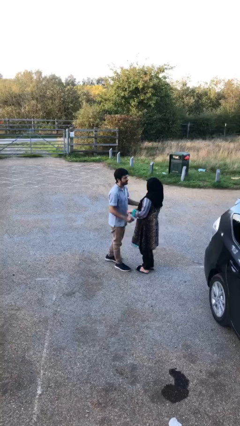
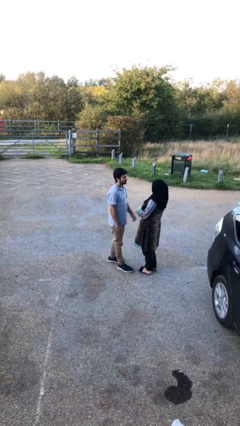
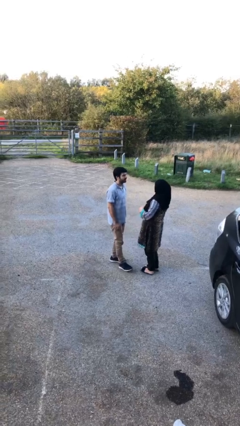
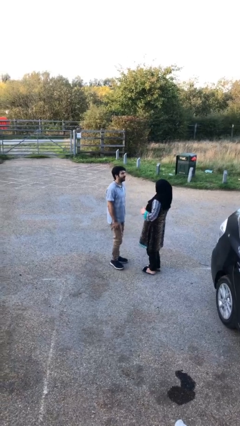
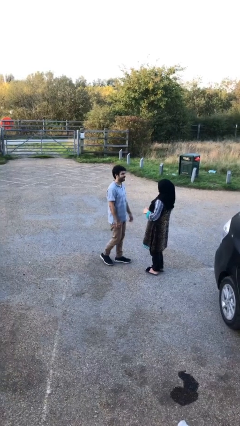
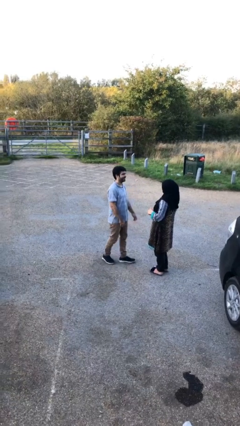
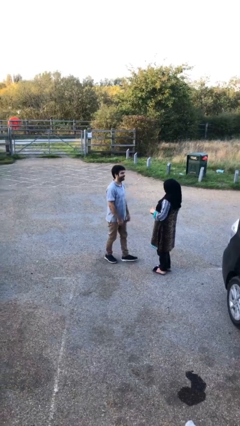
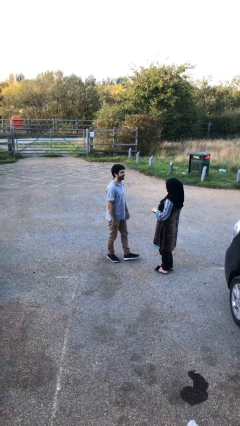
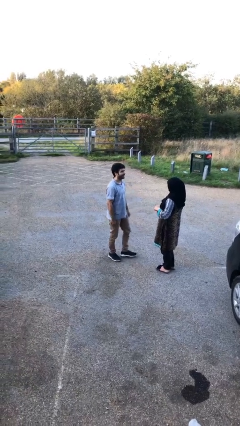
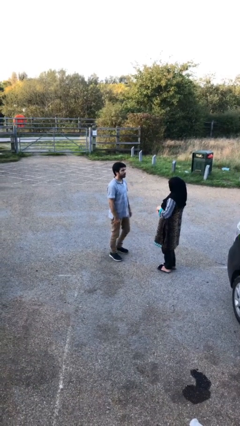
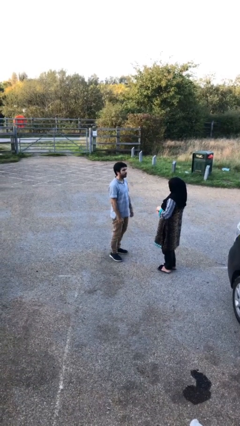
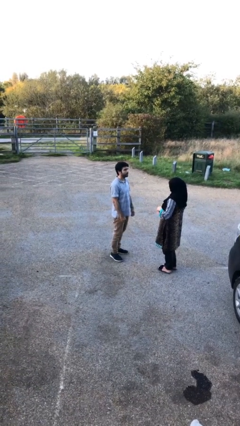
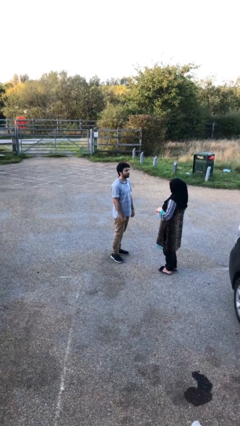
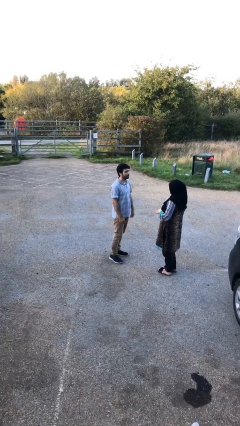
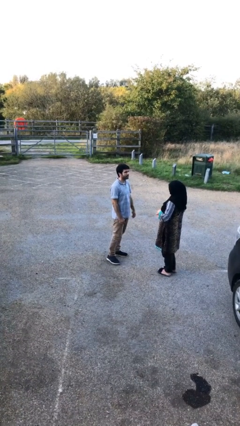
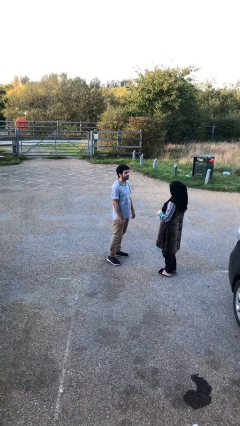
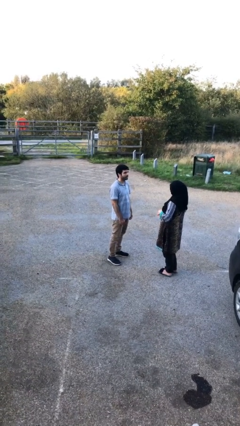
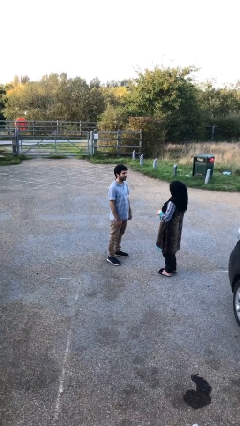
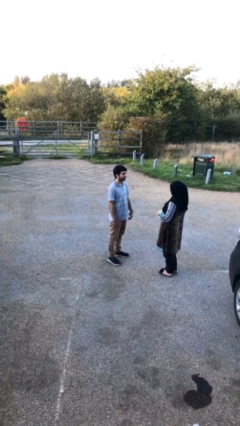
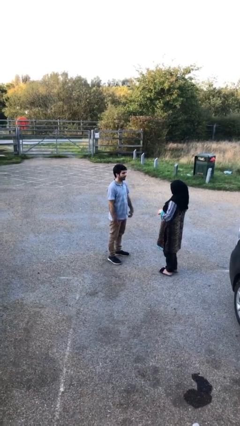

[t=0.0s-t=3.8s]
person talks to person

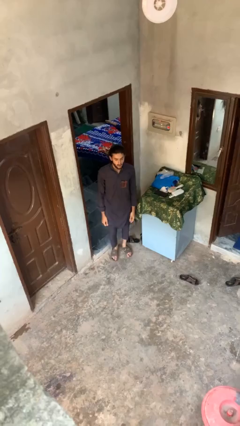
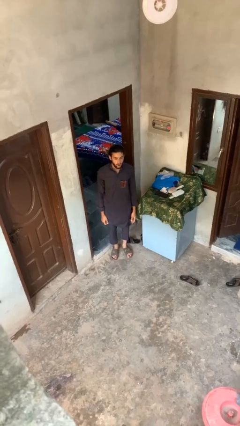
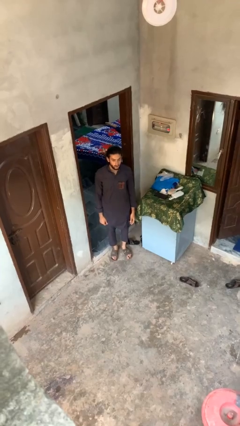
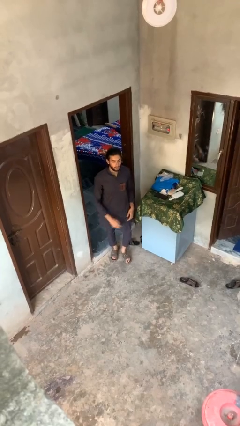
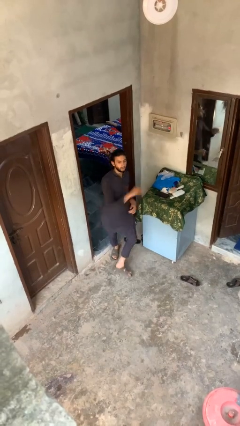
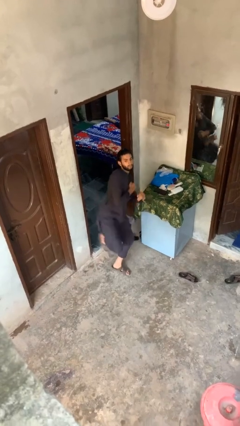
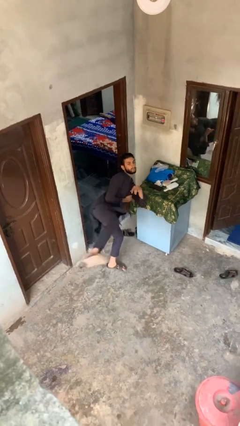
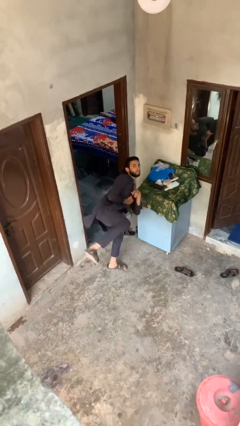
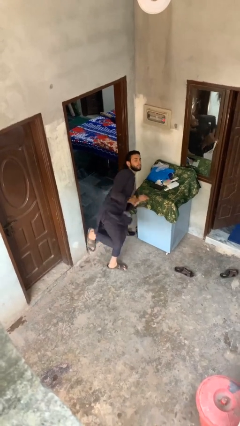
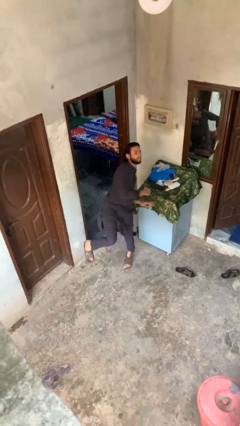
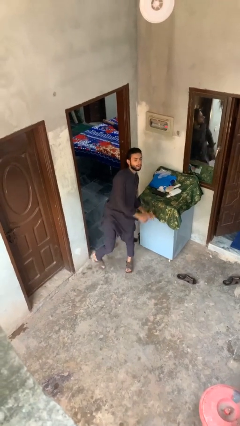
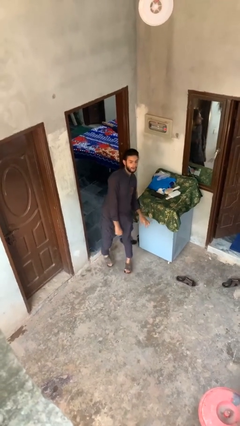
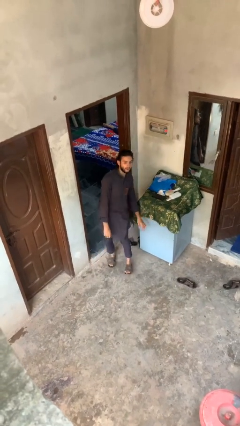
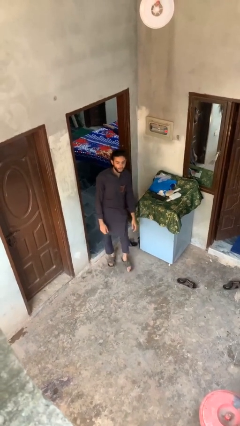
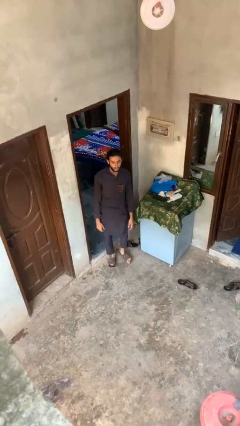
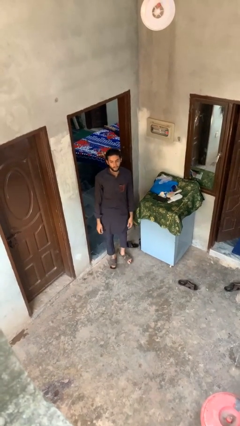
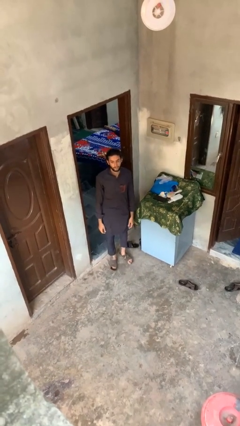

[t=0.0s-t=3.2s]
person karate kicks

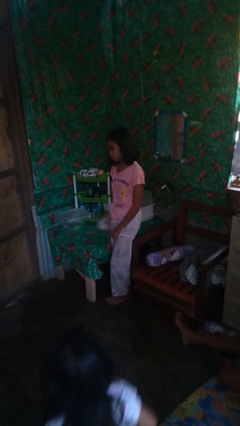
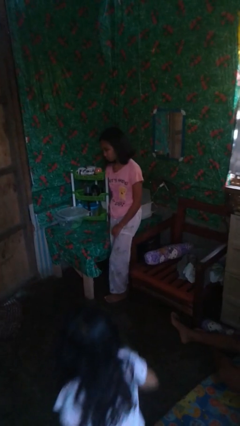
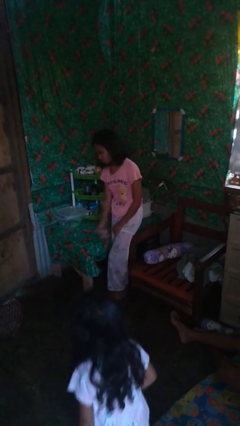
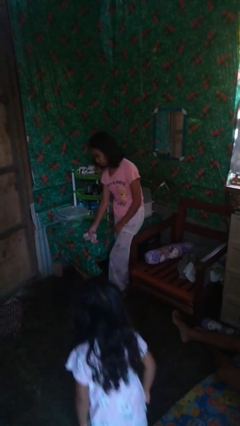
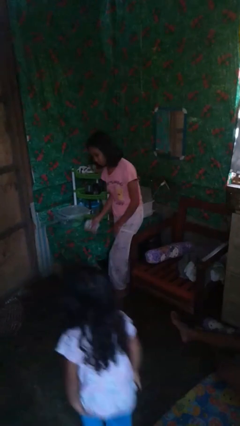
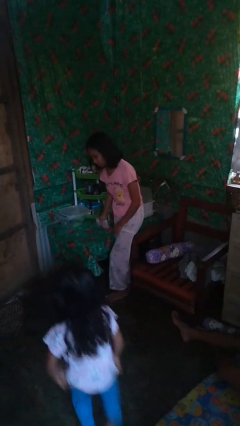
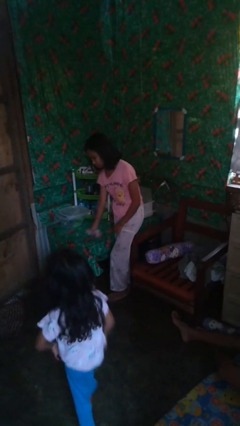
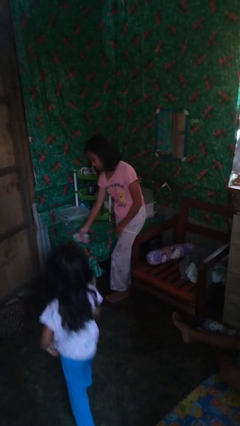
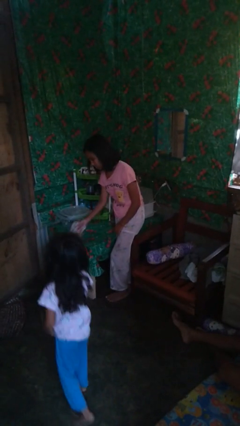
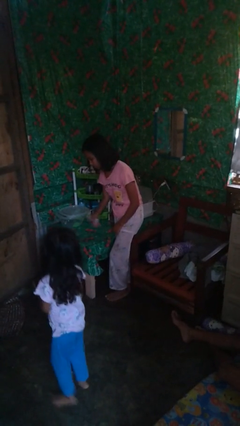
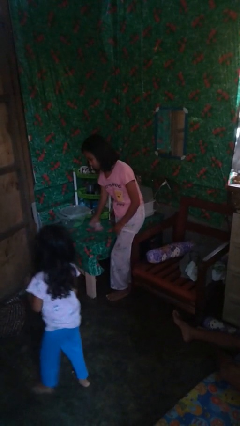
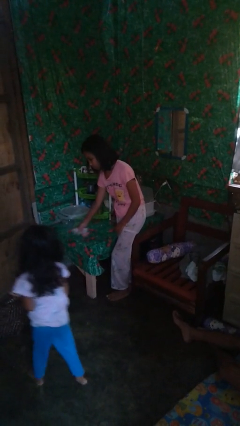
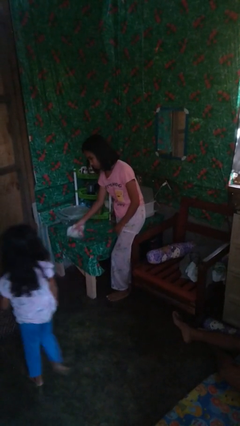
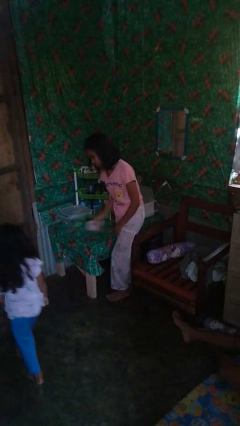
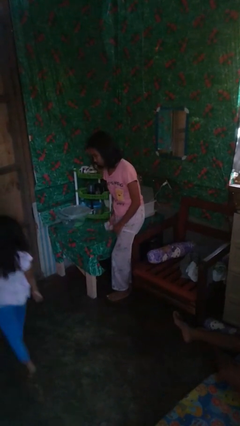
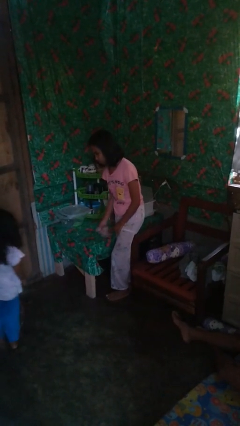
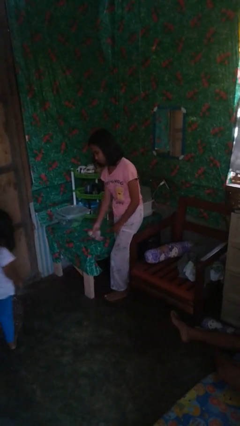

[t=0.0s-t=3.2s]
person cleans table with rag

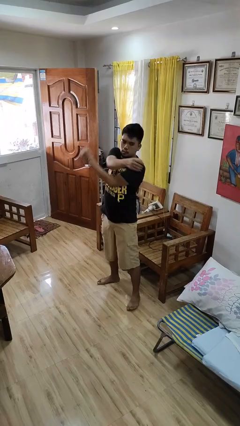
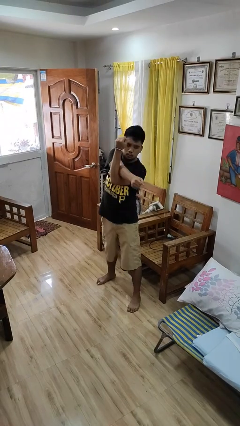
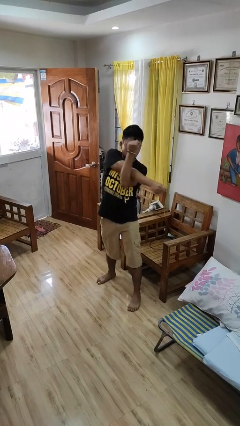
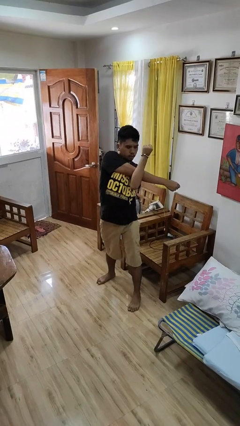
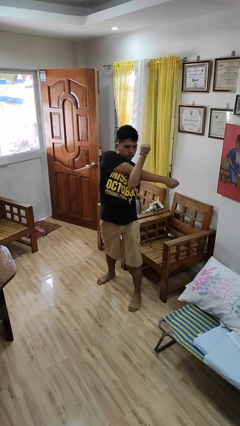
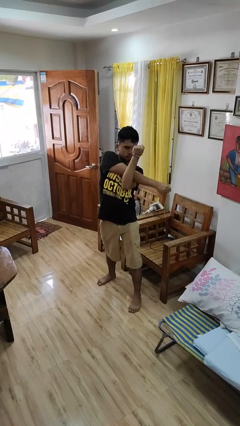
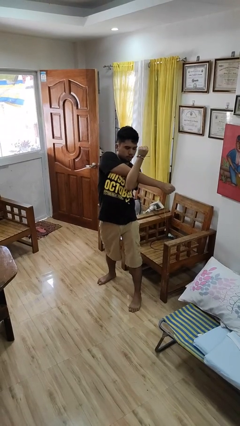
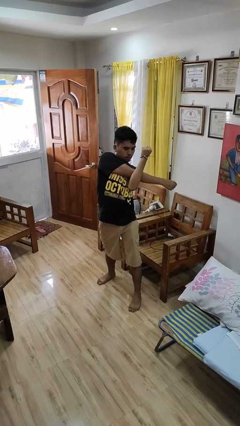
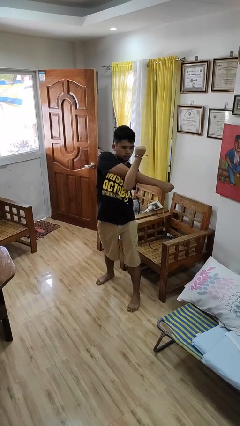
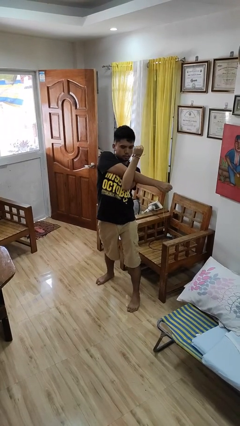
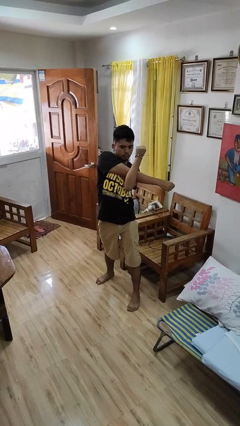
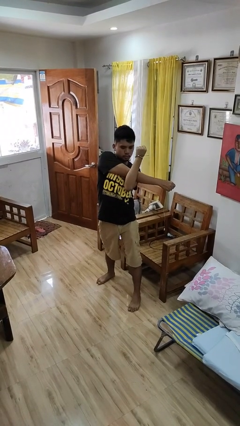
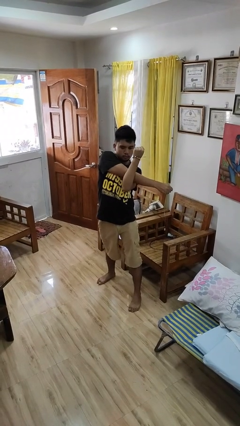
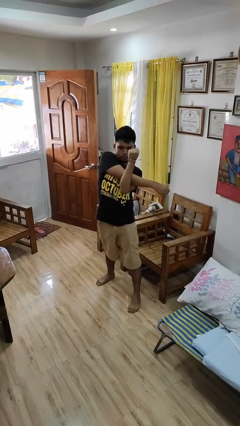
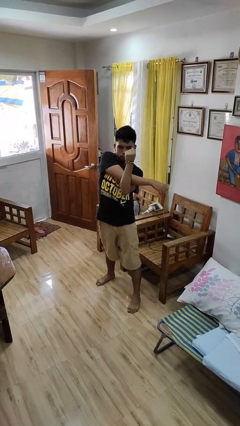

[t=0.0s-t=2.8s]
person stretches arms to side

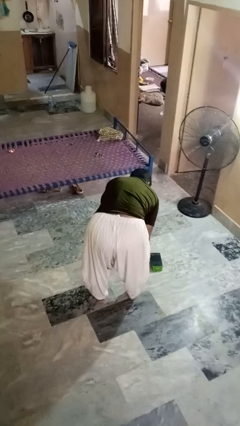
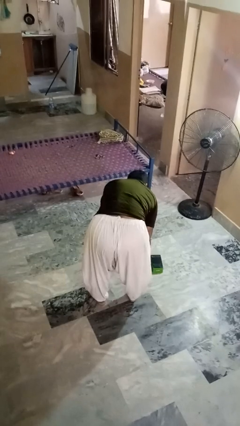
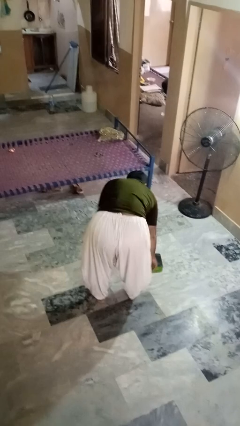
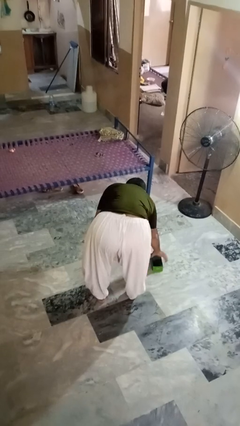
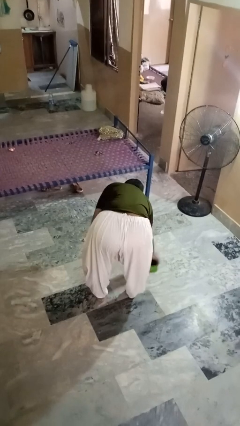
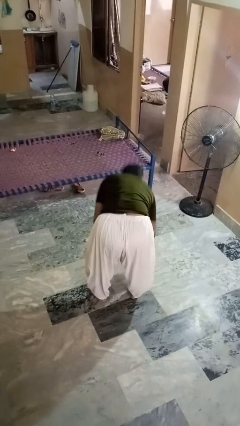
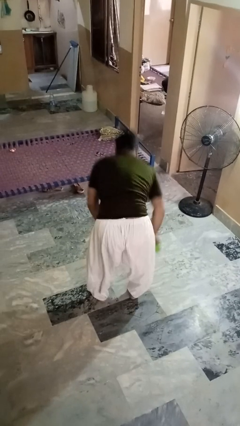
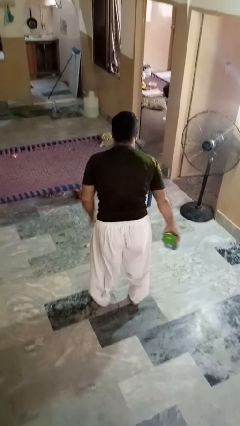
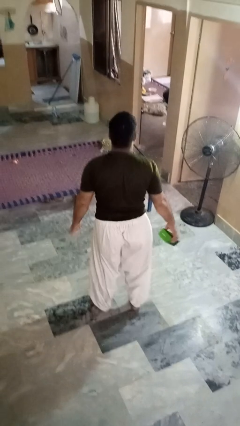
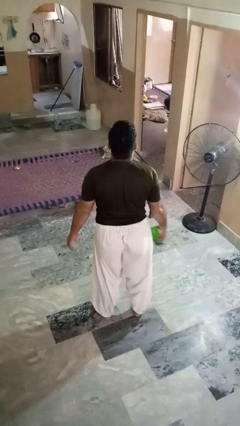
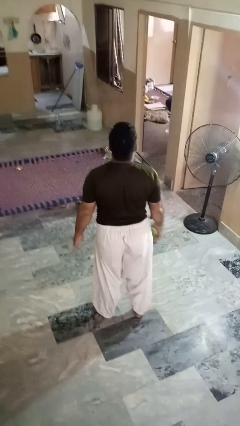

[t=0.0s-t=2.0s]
person picks up object from floor

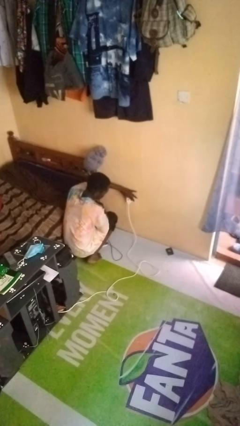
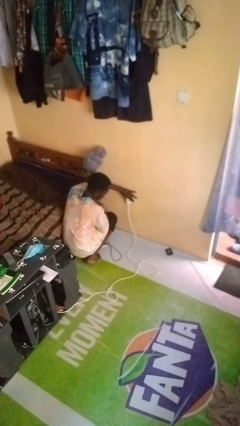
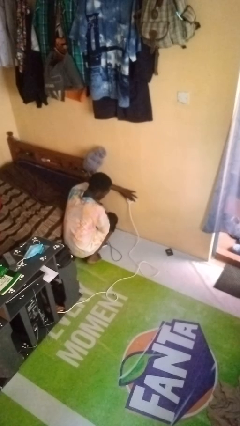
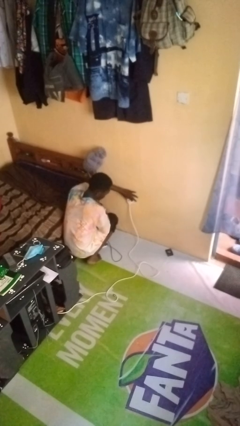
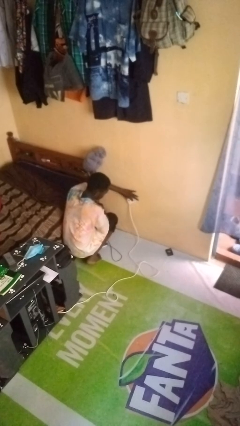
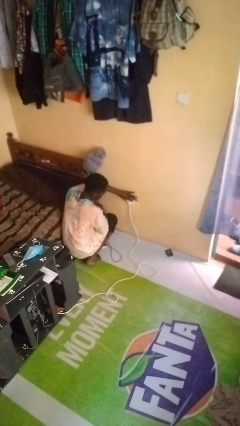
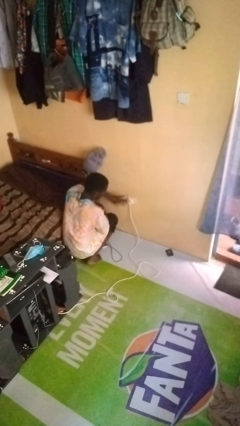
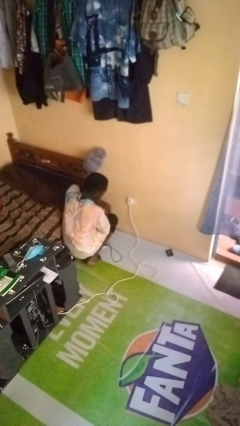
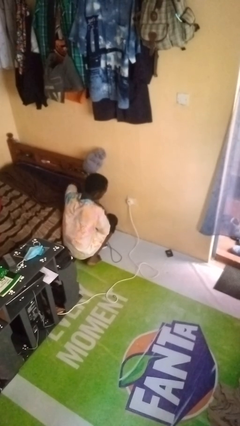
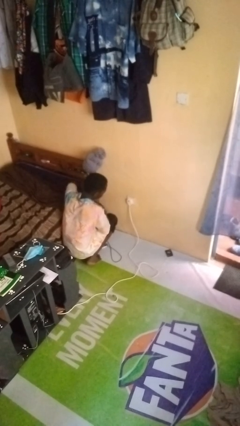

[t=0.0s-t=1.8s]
person plugs into electrical socket

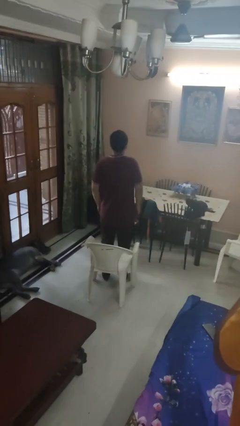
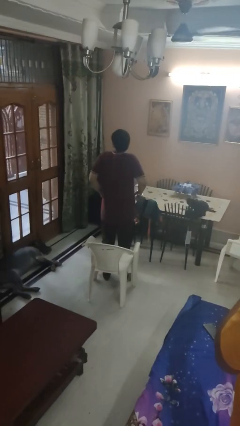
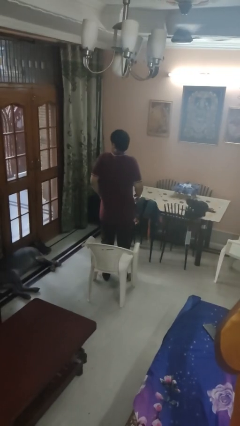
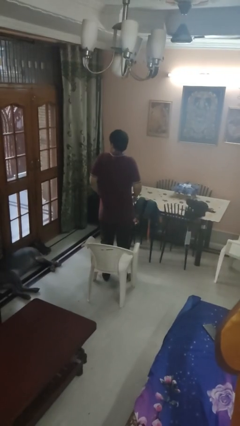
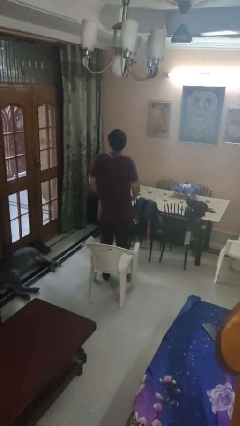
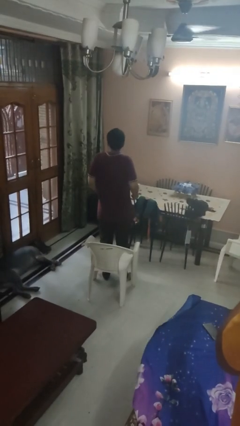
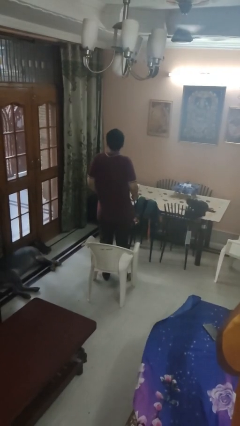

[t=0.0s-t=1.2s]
person shrugs
